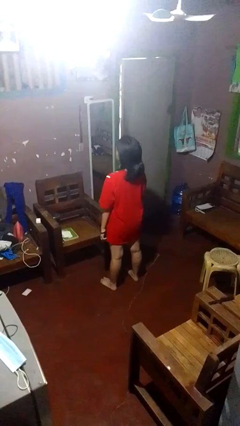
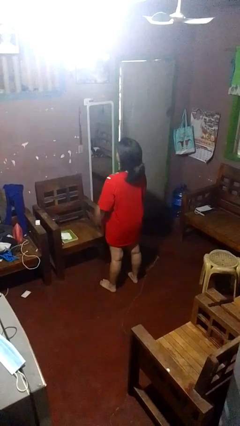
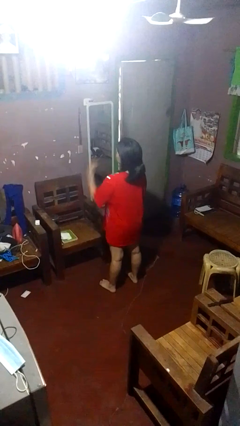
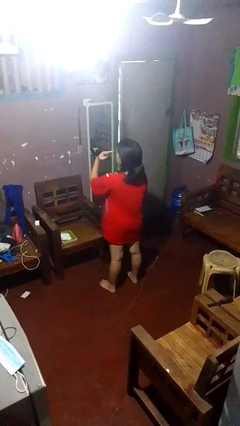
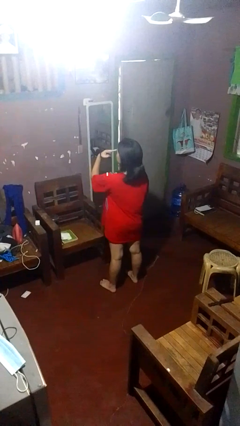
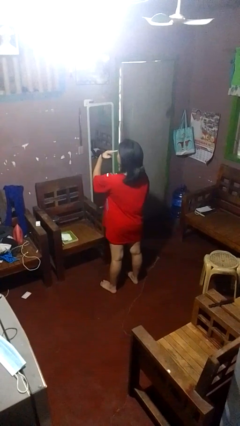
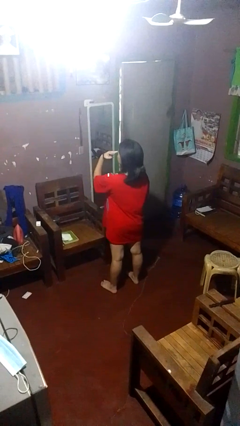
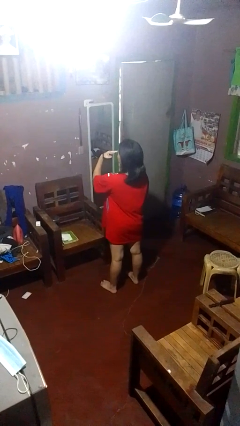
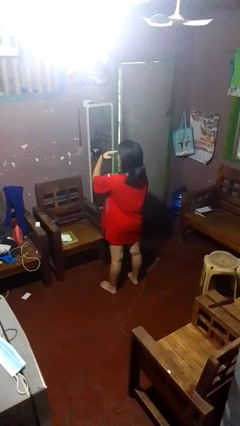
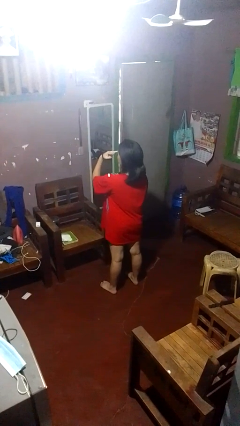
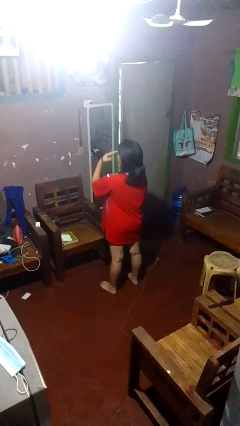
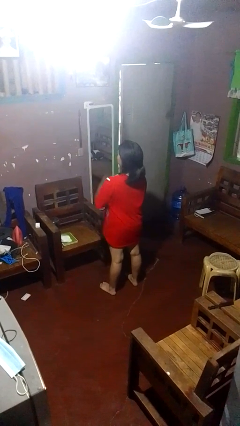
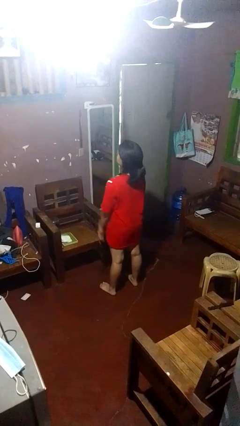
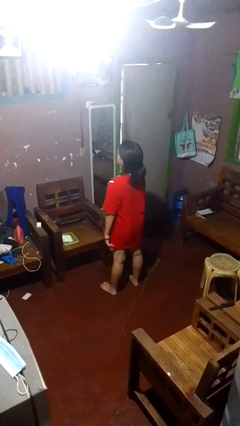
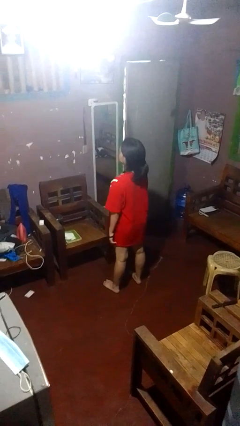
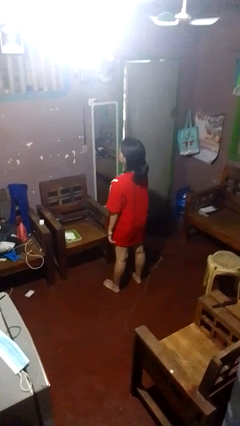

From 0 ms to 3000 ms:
person gestures watch closely

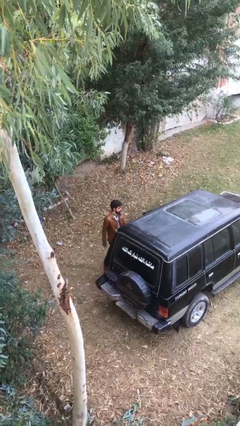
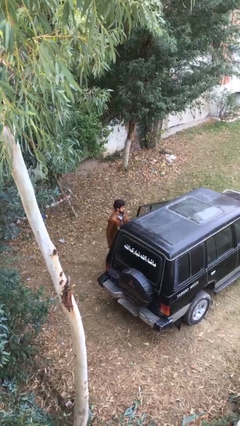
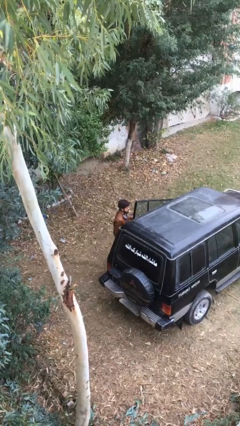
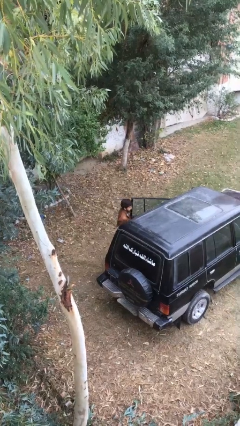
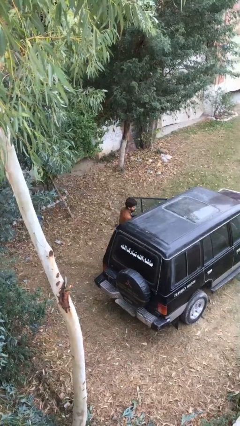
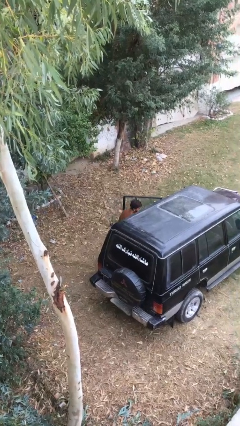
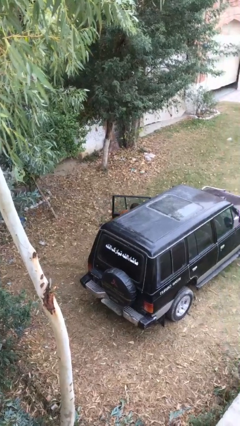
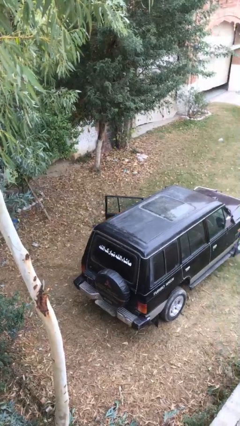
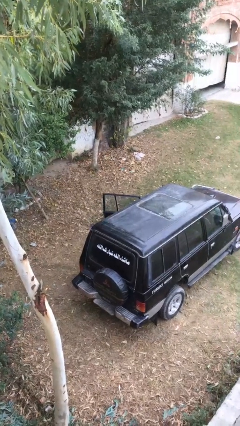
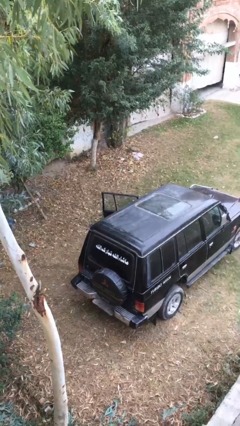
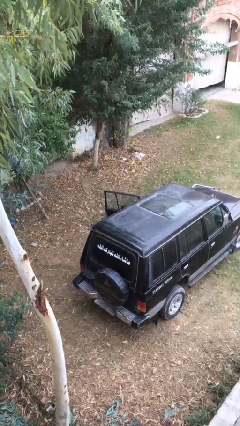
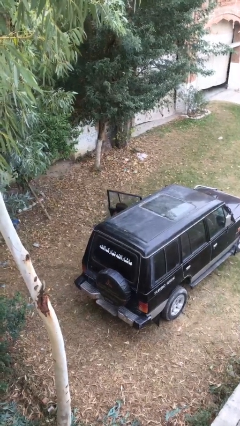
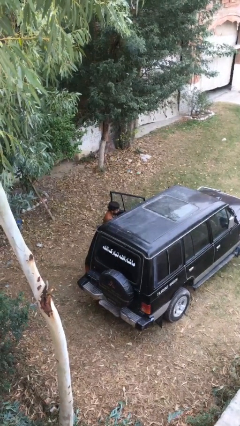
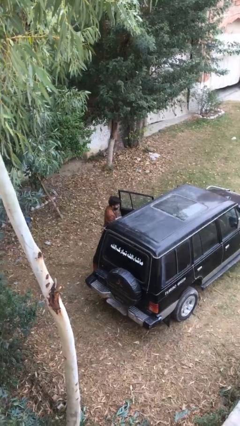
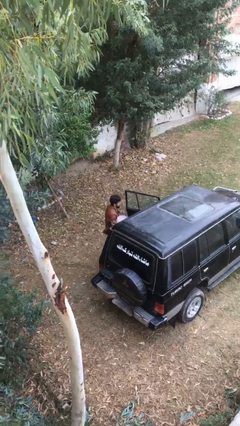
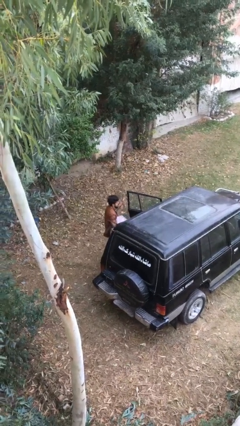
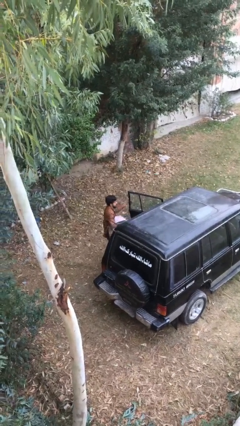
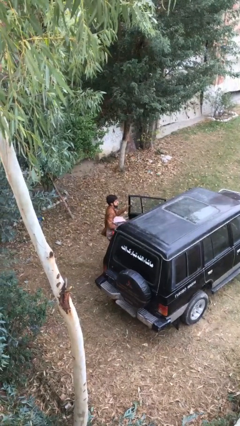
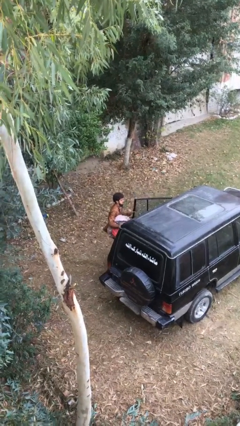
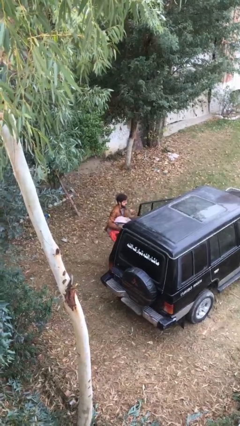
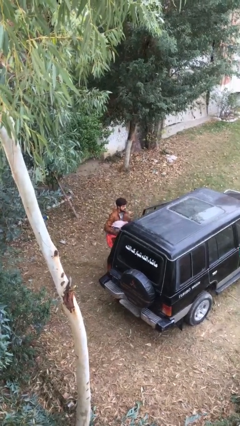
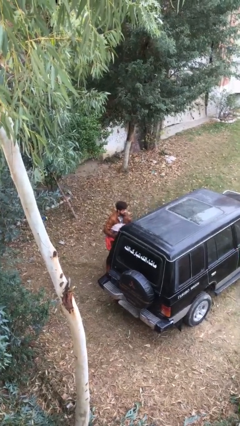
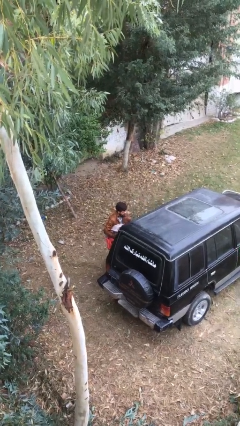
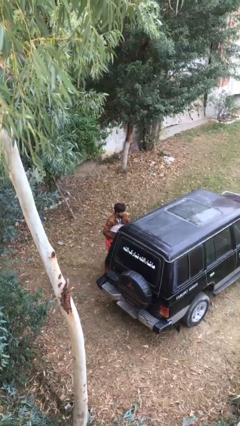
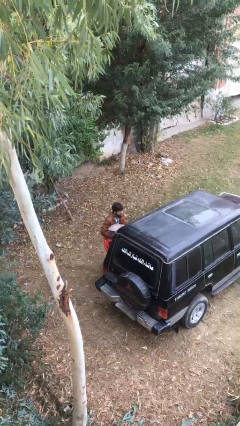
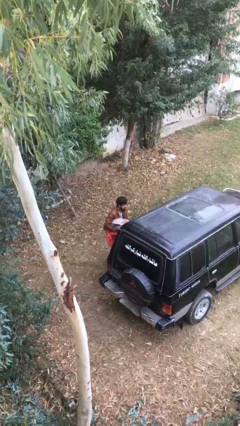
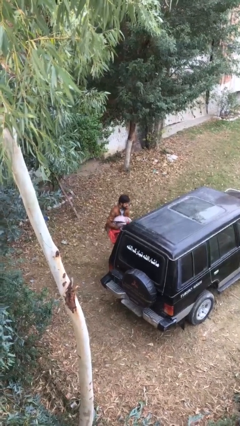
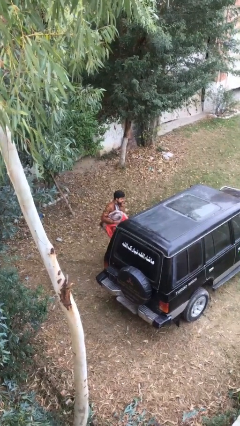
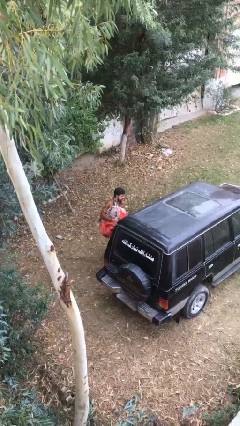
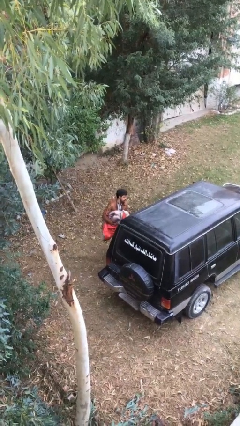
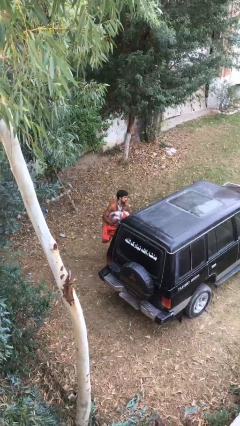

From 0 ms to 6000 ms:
person unloads car

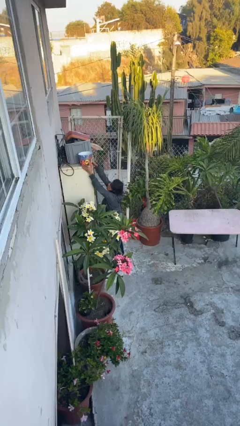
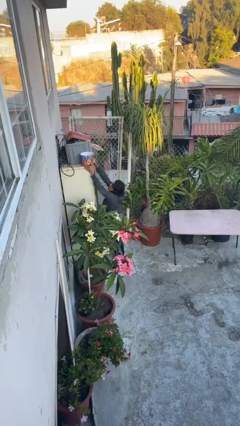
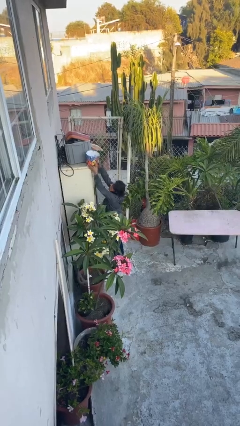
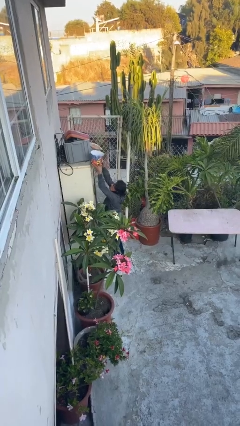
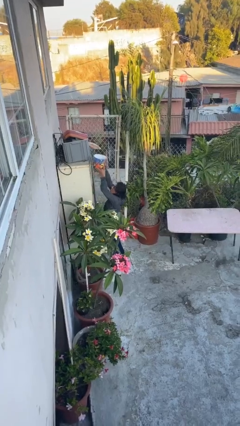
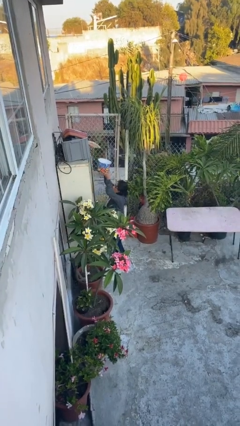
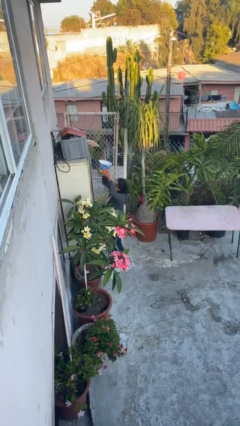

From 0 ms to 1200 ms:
person picks up object from shelf

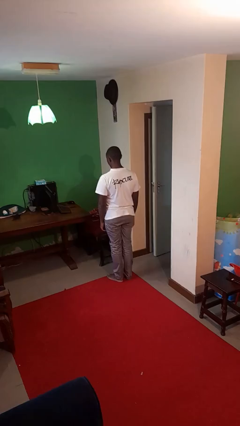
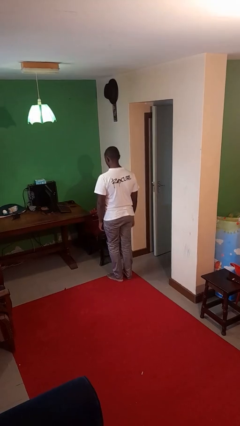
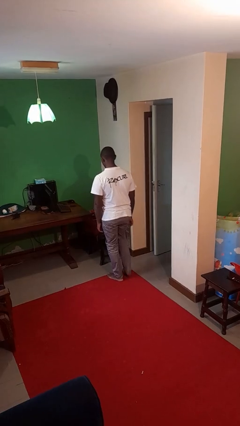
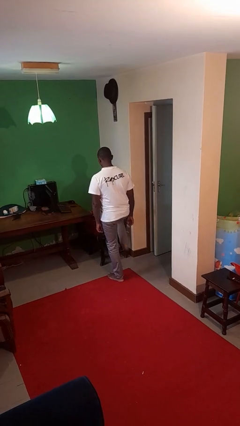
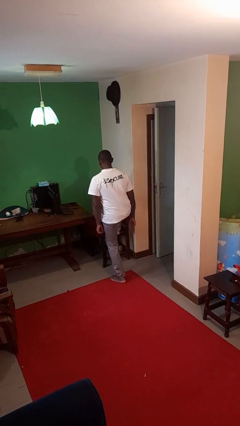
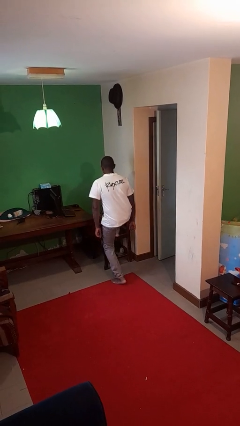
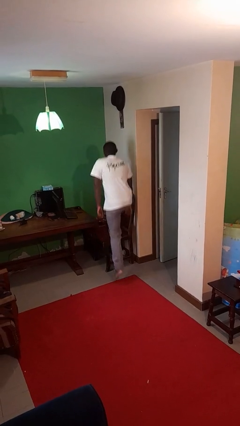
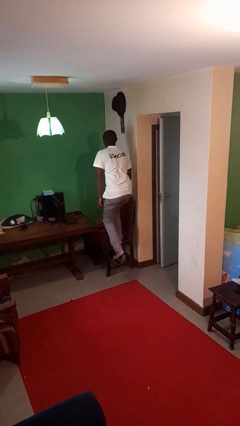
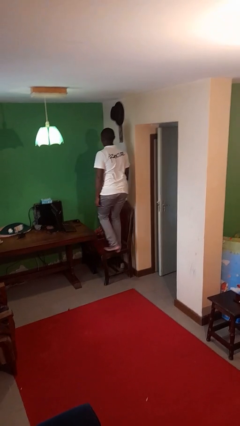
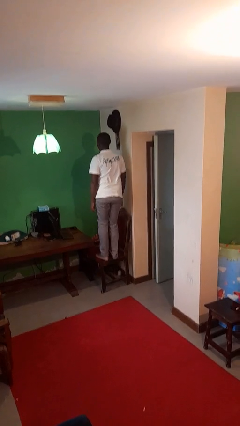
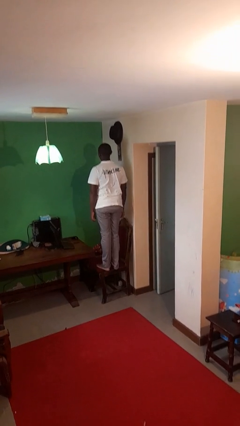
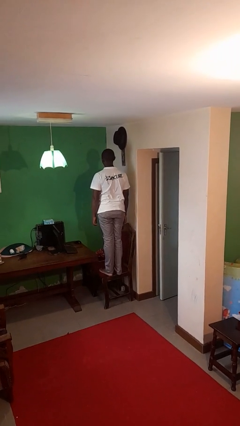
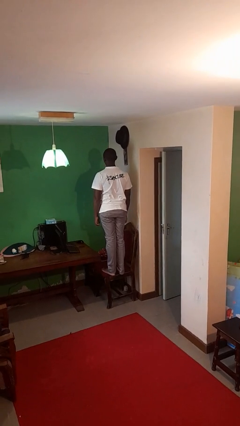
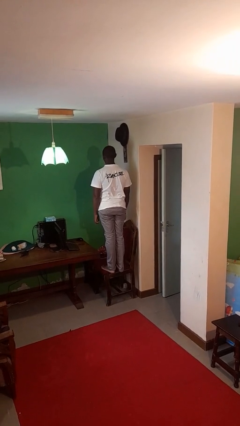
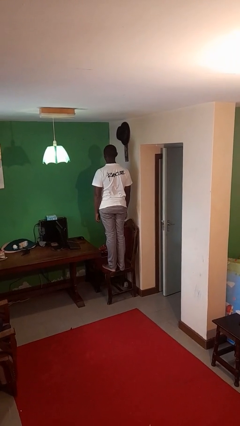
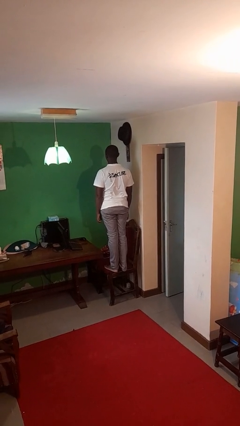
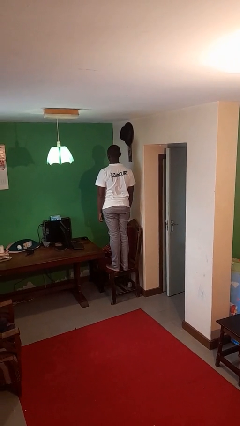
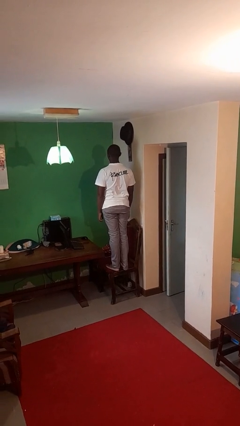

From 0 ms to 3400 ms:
person climbs on chair

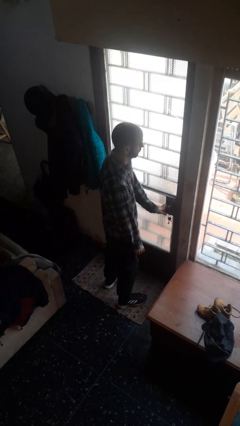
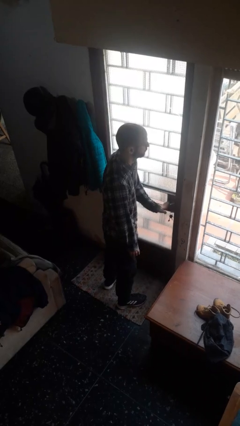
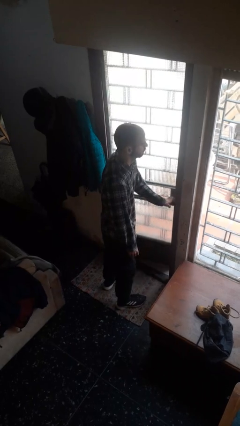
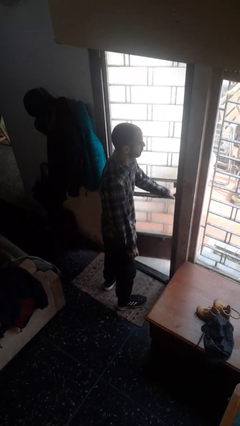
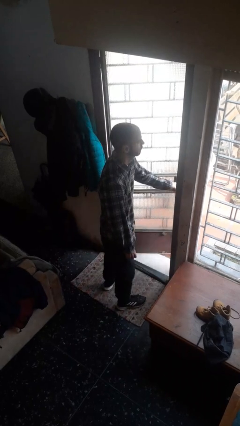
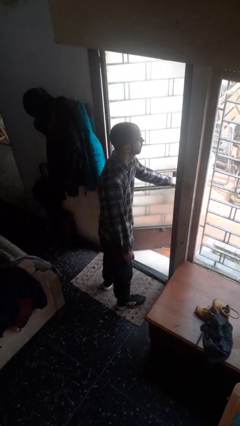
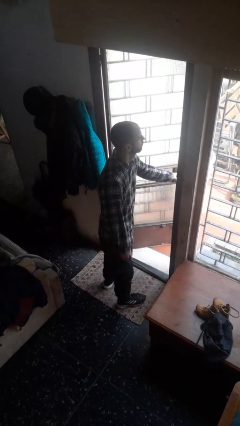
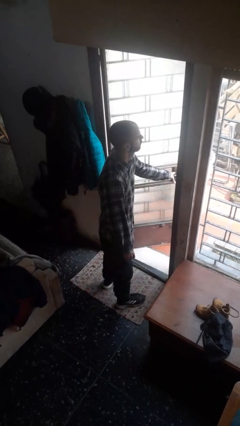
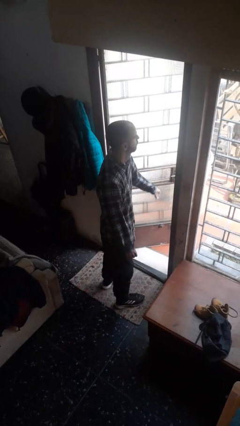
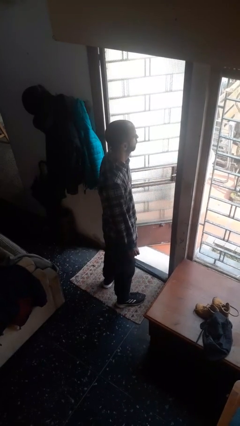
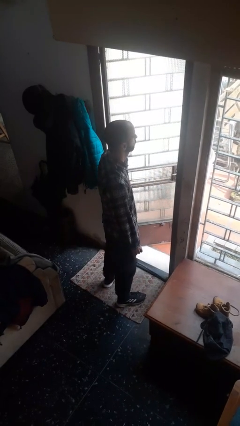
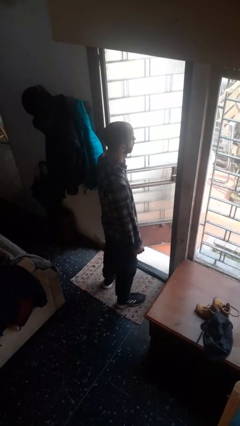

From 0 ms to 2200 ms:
person opens facility door

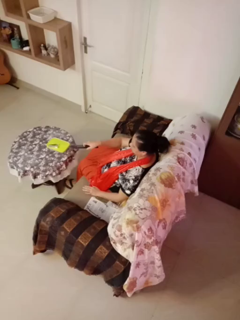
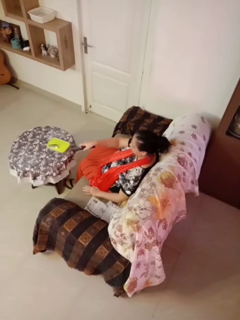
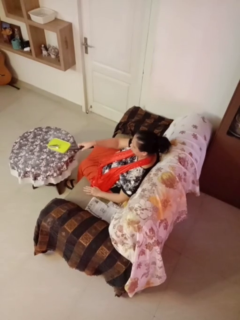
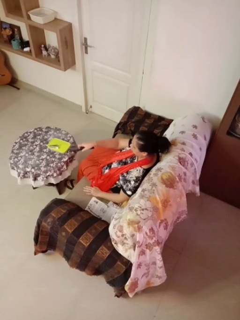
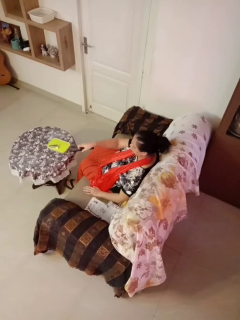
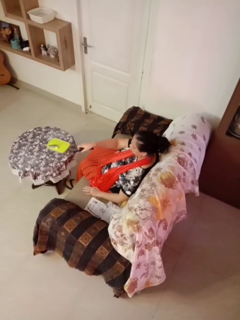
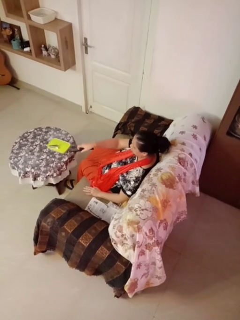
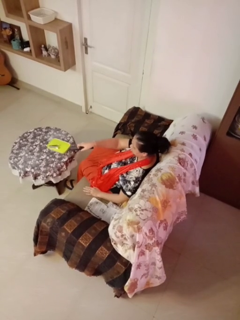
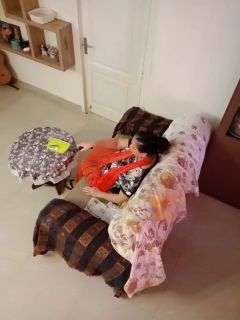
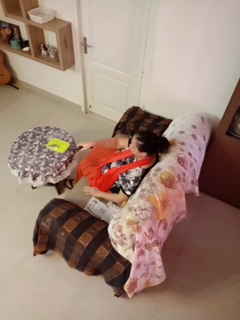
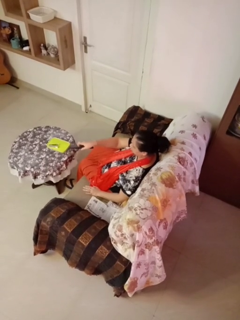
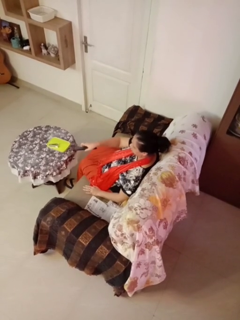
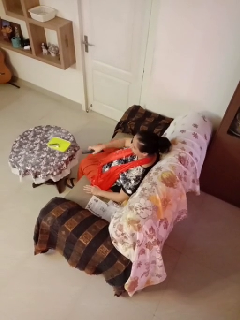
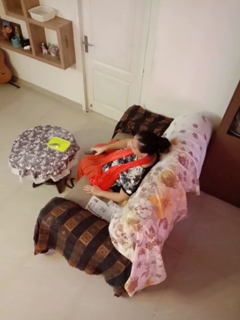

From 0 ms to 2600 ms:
person uses television remote
